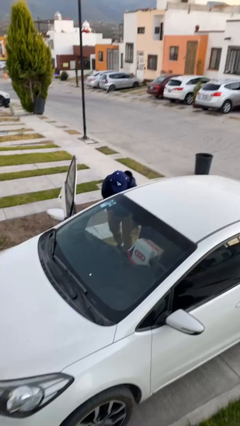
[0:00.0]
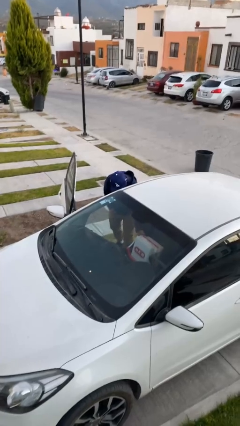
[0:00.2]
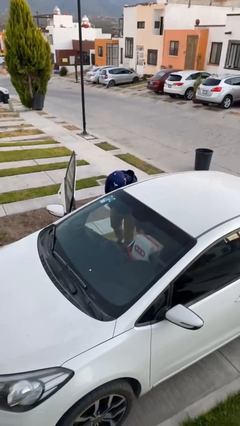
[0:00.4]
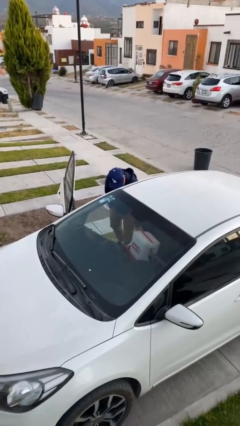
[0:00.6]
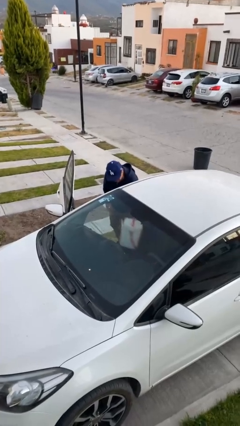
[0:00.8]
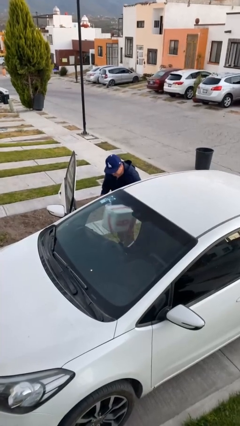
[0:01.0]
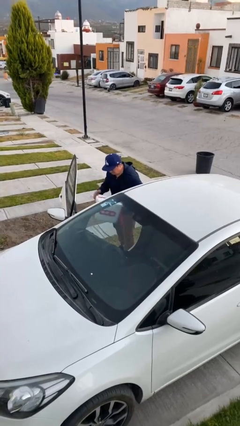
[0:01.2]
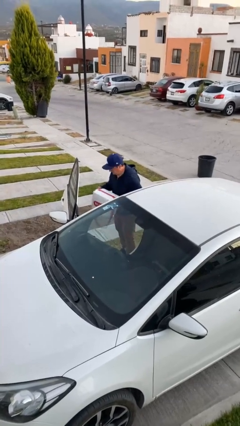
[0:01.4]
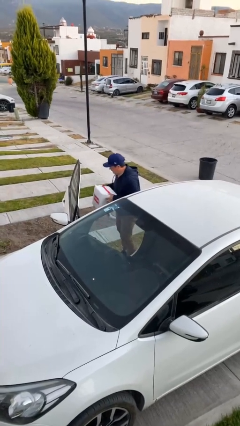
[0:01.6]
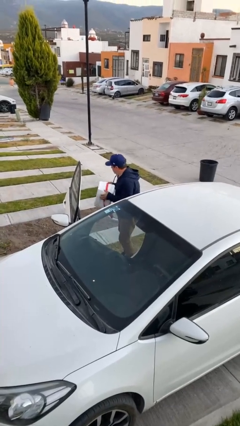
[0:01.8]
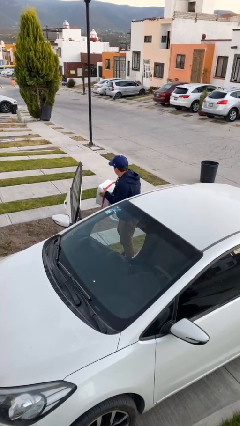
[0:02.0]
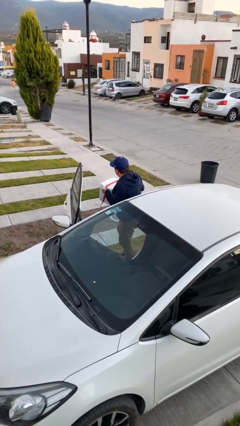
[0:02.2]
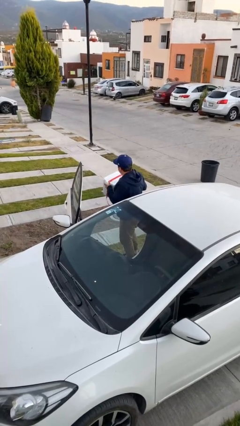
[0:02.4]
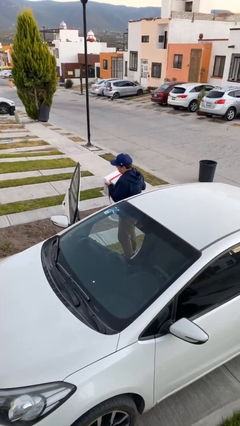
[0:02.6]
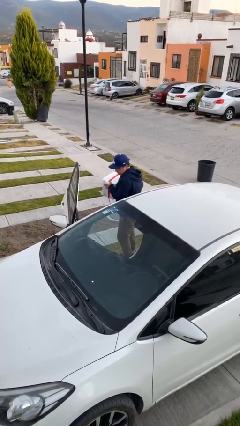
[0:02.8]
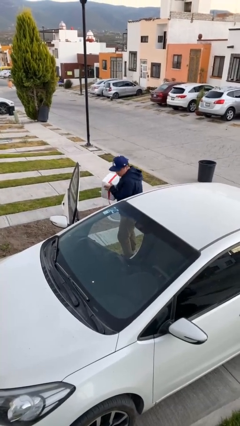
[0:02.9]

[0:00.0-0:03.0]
person unloads car

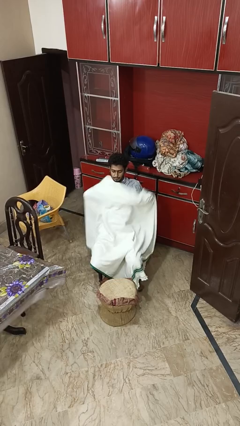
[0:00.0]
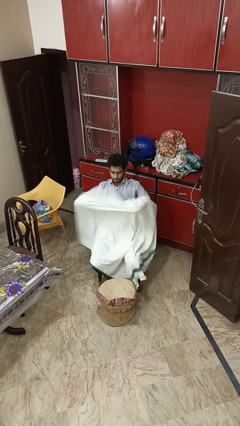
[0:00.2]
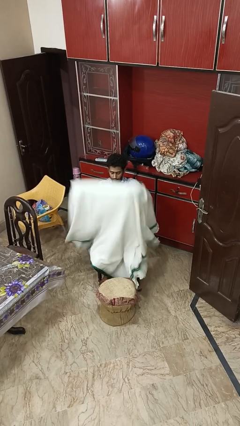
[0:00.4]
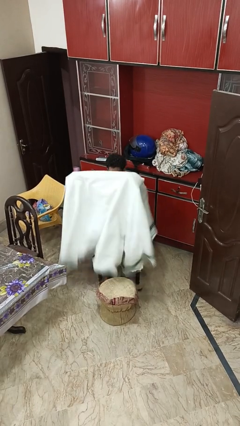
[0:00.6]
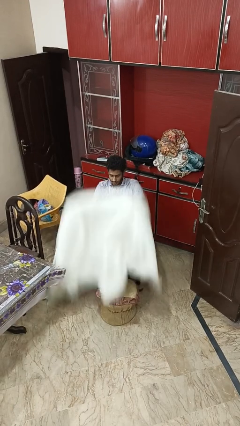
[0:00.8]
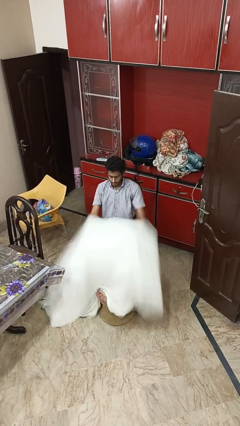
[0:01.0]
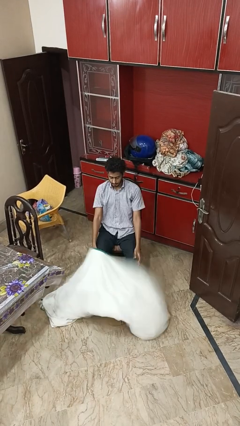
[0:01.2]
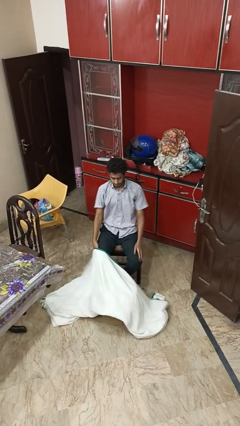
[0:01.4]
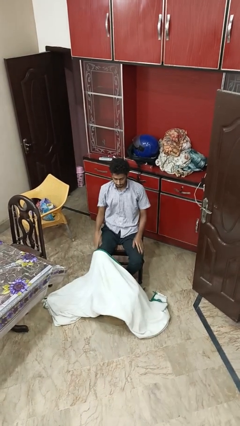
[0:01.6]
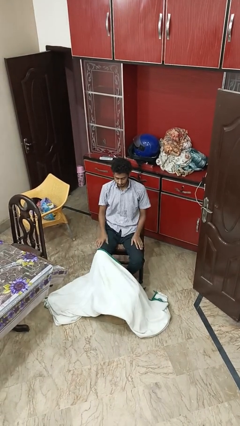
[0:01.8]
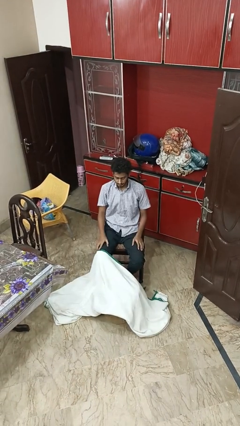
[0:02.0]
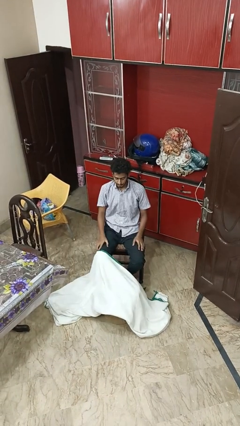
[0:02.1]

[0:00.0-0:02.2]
person uncovers with blanket

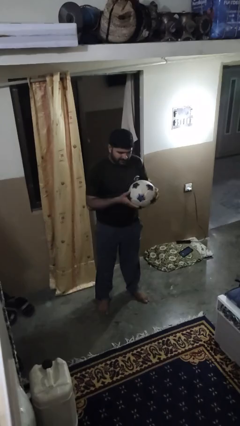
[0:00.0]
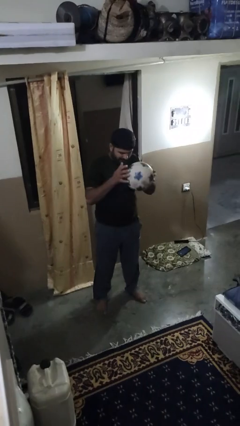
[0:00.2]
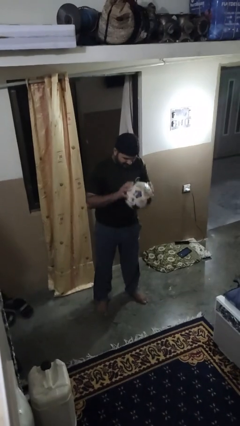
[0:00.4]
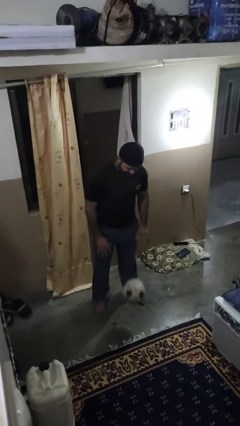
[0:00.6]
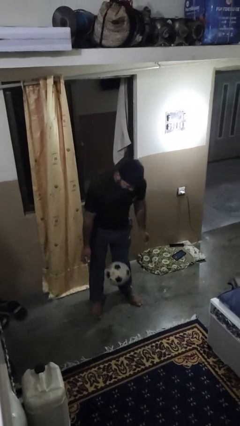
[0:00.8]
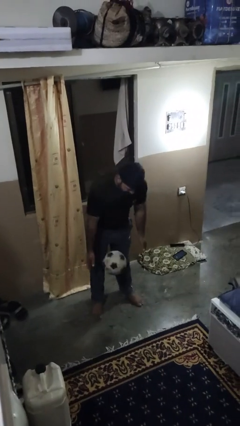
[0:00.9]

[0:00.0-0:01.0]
person bounces ball on floor

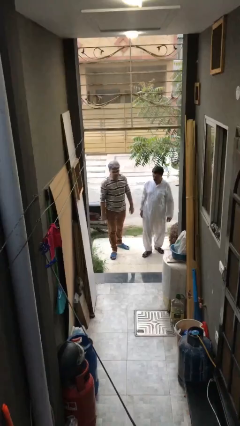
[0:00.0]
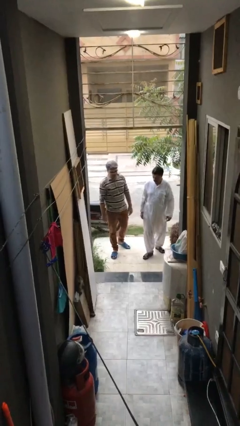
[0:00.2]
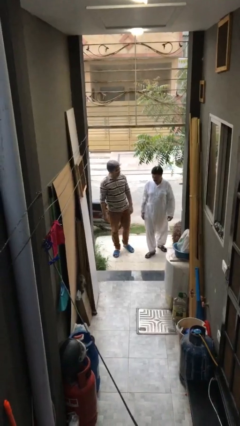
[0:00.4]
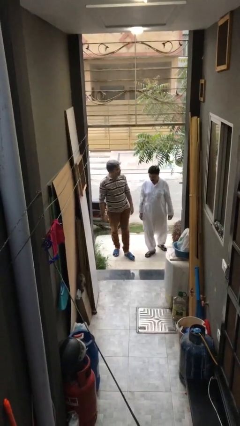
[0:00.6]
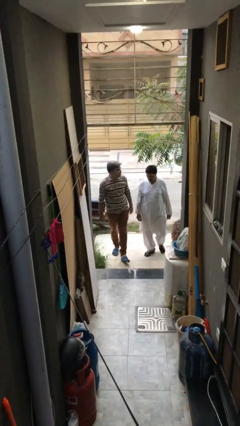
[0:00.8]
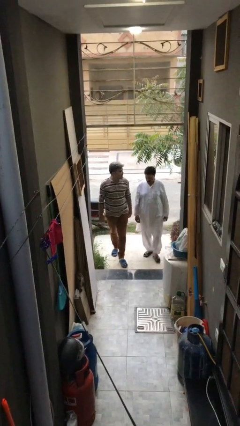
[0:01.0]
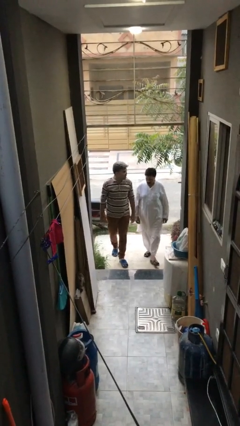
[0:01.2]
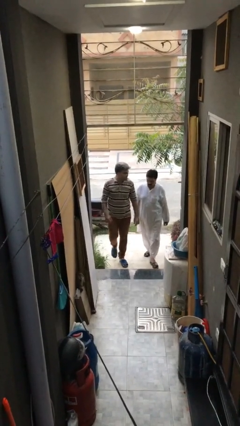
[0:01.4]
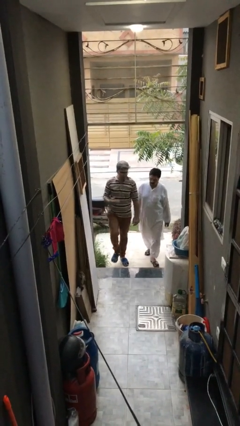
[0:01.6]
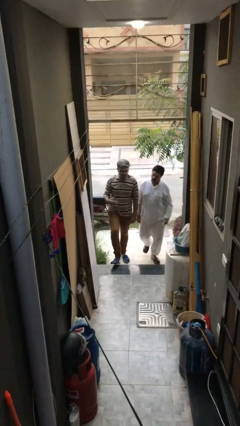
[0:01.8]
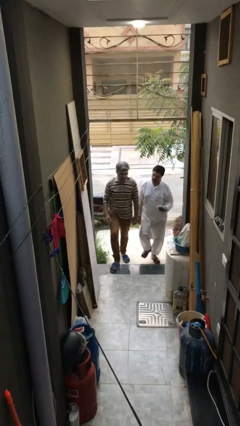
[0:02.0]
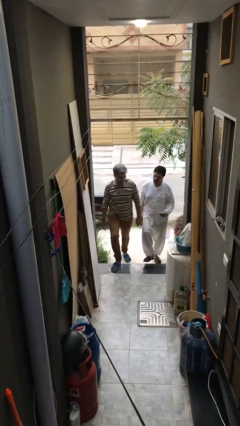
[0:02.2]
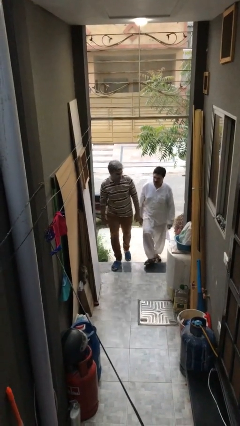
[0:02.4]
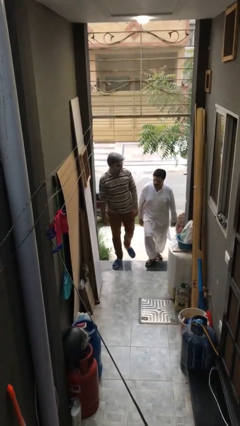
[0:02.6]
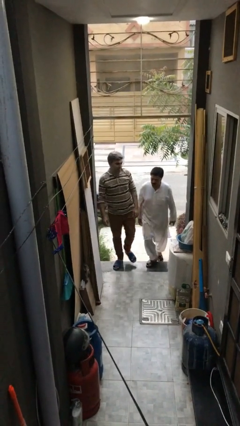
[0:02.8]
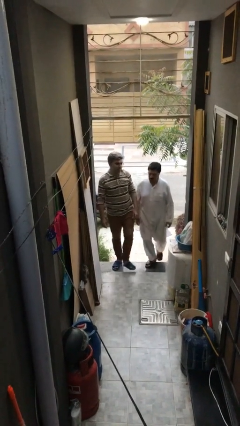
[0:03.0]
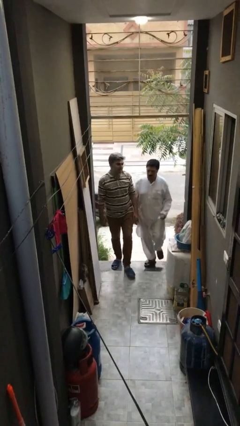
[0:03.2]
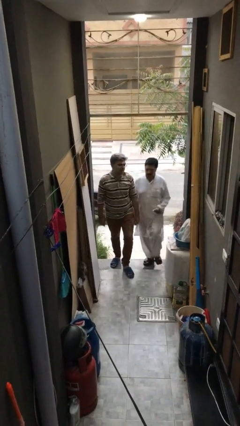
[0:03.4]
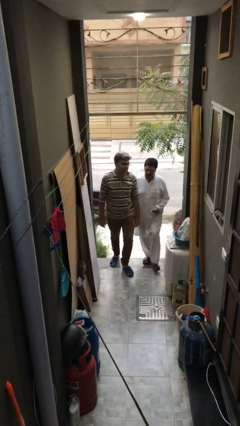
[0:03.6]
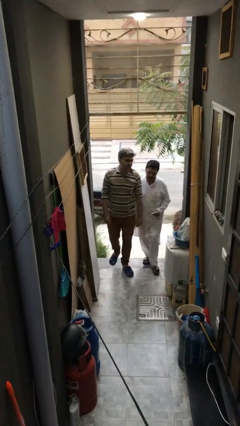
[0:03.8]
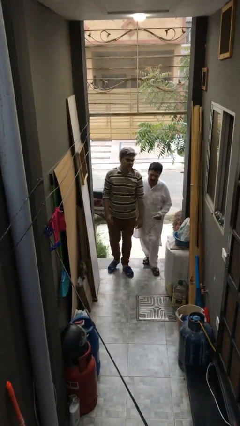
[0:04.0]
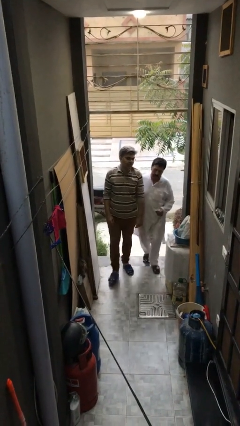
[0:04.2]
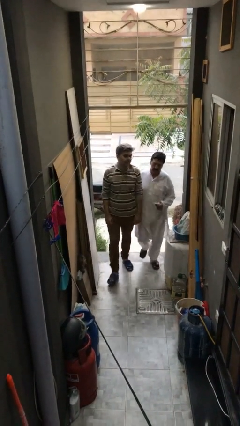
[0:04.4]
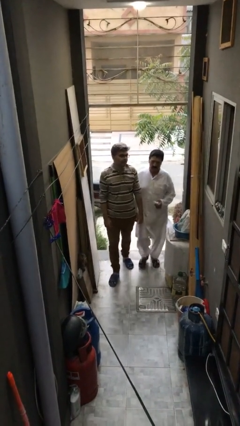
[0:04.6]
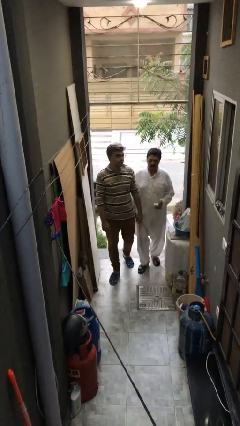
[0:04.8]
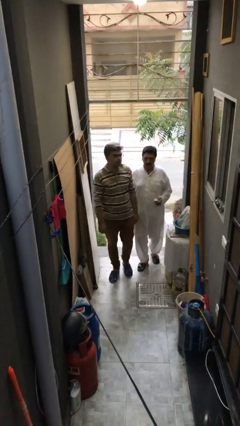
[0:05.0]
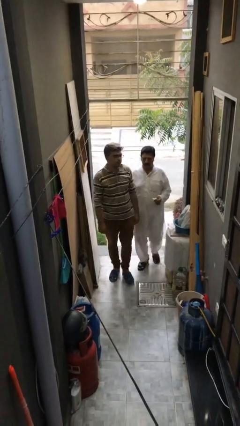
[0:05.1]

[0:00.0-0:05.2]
person talks to person

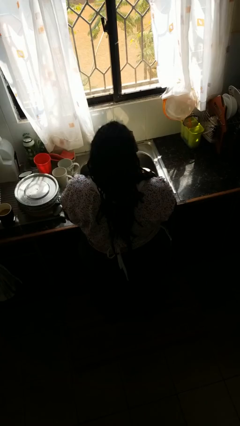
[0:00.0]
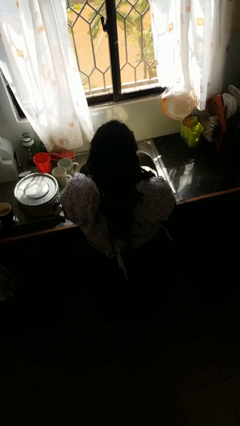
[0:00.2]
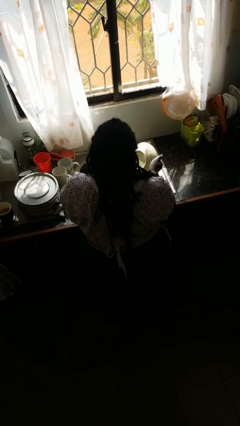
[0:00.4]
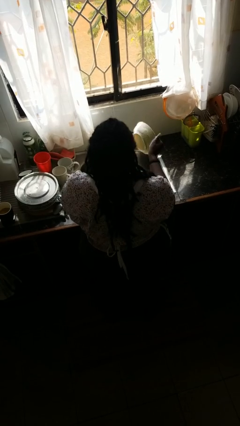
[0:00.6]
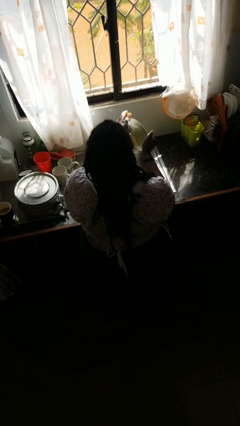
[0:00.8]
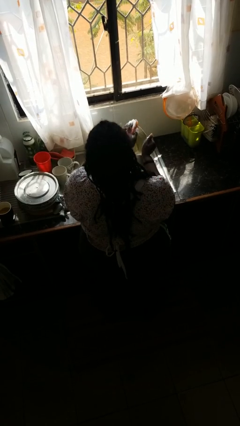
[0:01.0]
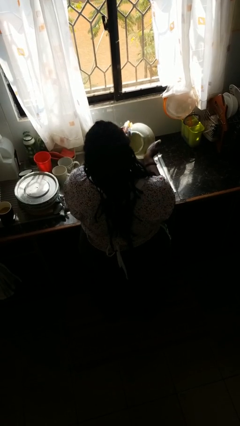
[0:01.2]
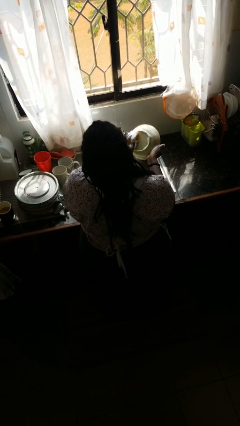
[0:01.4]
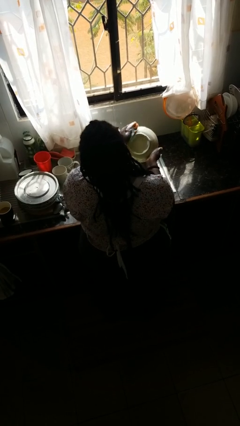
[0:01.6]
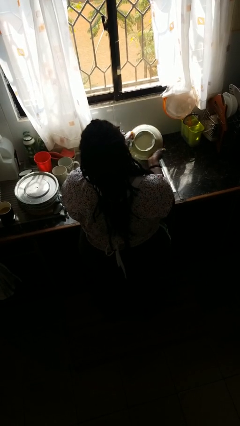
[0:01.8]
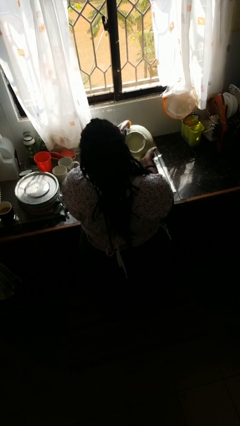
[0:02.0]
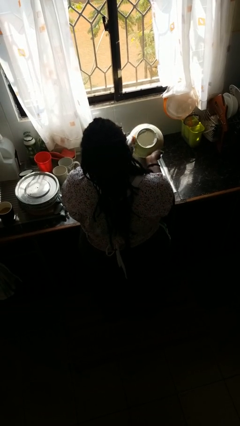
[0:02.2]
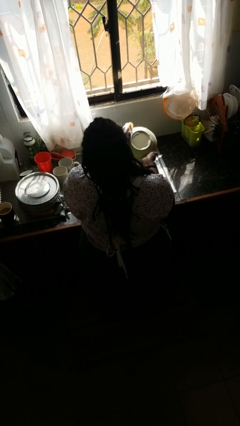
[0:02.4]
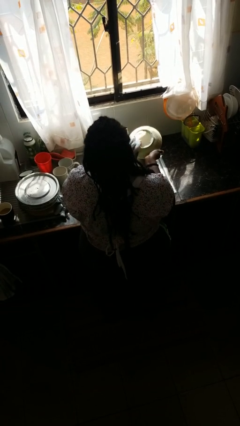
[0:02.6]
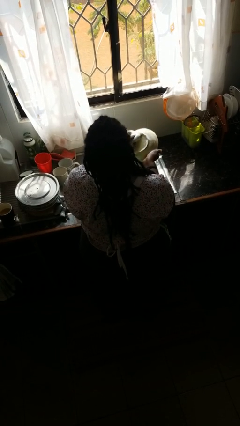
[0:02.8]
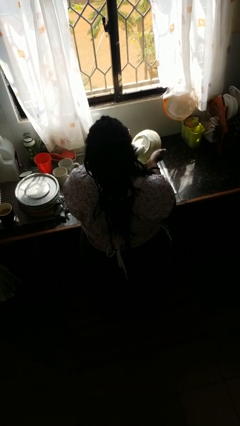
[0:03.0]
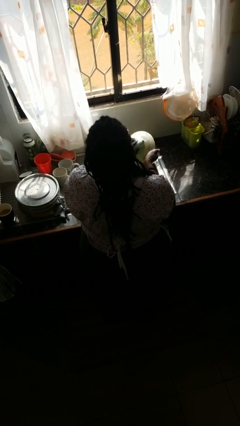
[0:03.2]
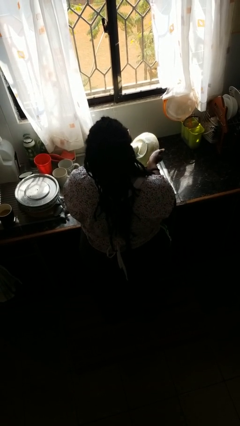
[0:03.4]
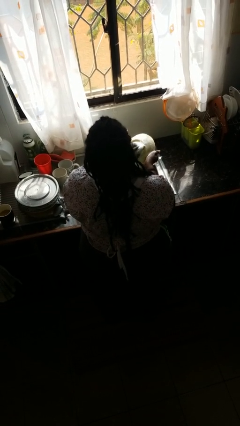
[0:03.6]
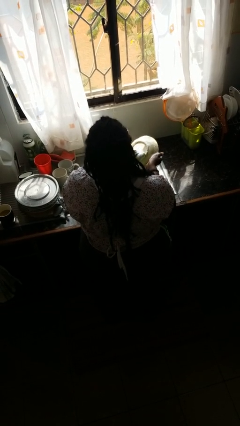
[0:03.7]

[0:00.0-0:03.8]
person washes dish

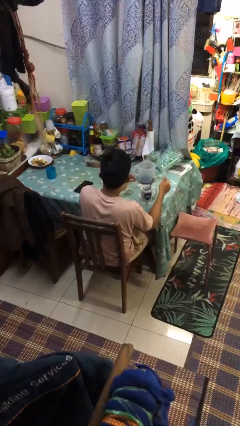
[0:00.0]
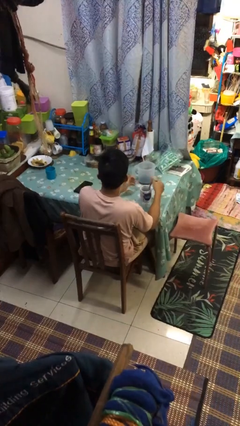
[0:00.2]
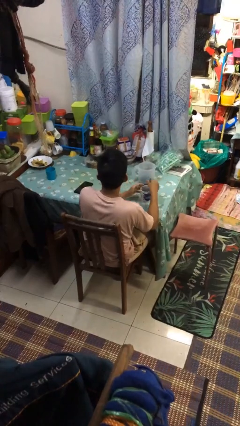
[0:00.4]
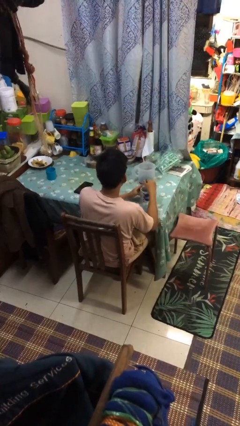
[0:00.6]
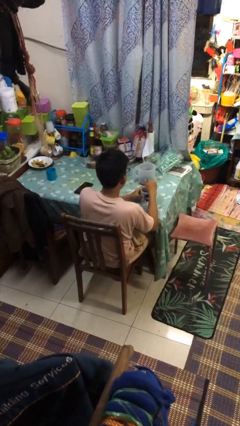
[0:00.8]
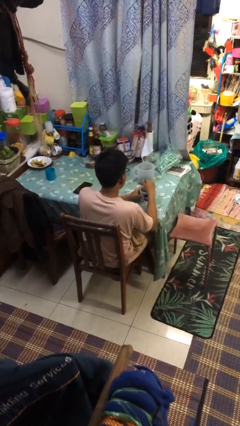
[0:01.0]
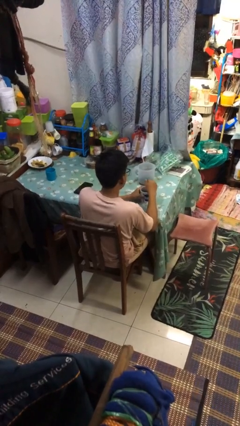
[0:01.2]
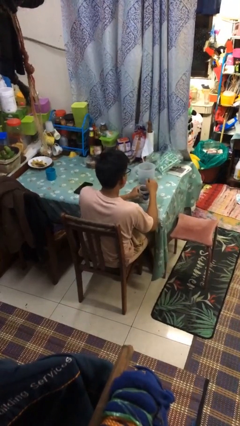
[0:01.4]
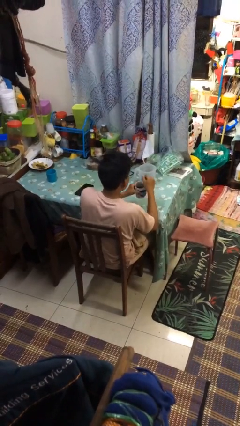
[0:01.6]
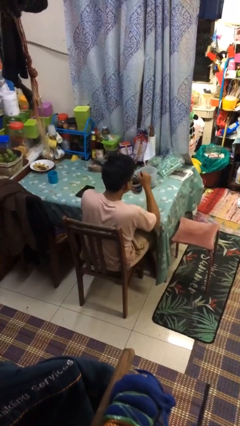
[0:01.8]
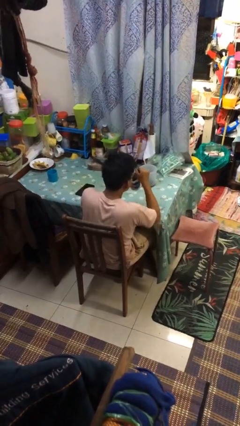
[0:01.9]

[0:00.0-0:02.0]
person stirs mug
